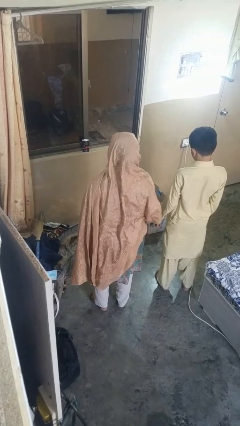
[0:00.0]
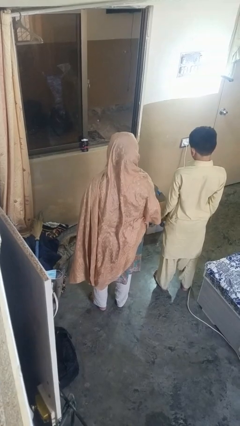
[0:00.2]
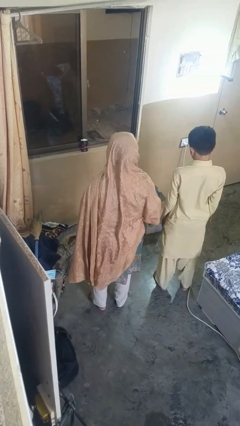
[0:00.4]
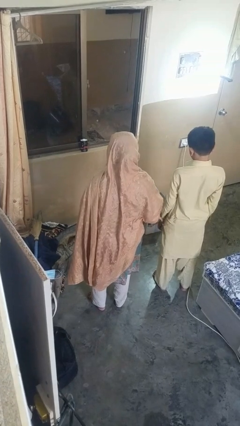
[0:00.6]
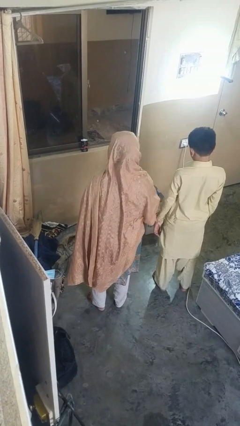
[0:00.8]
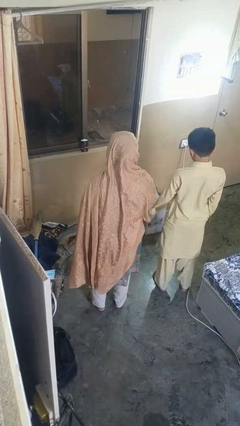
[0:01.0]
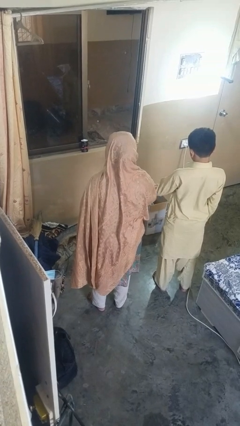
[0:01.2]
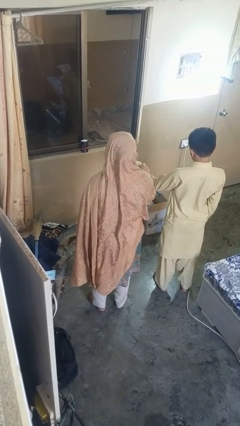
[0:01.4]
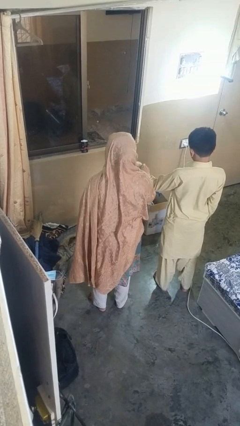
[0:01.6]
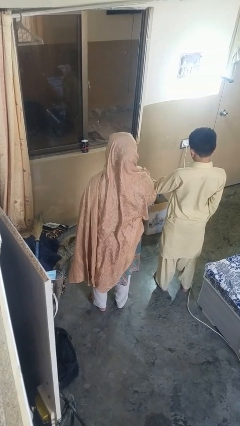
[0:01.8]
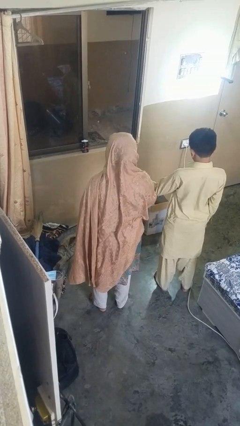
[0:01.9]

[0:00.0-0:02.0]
person grabs person by forearm

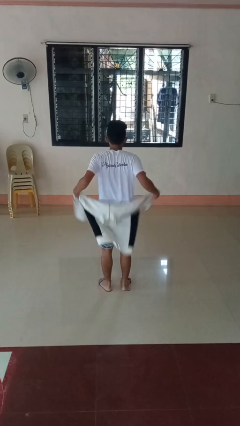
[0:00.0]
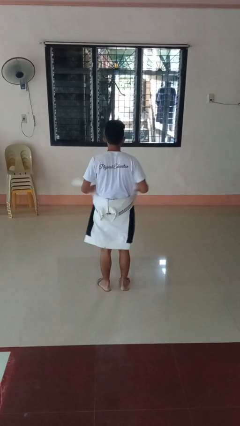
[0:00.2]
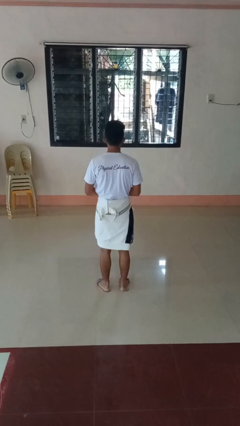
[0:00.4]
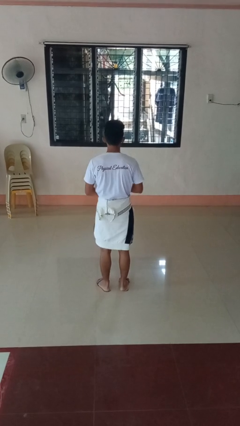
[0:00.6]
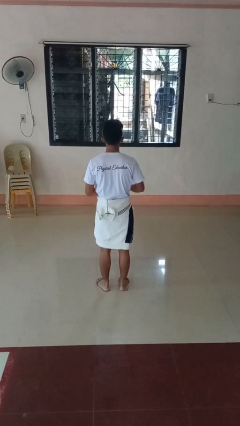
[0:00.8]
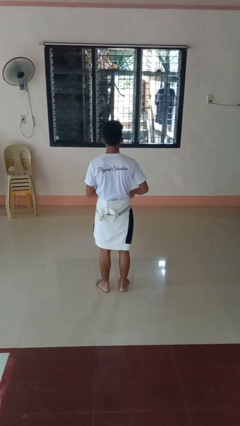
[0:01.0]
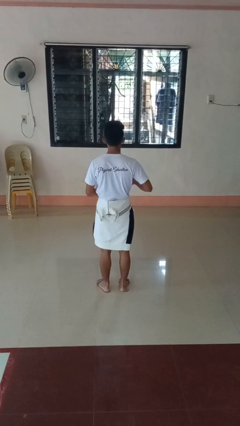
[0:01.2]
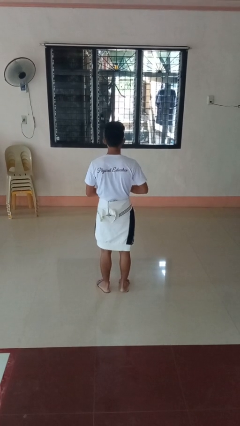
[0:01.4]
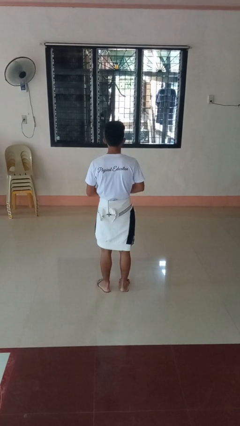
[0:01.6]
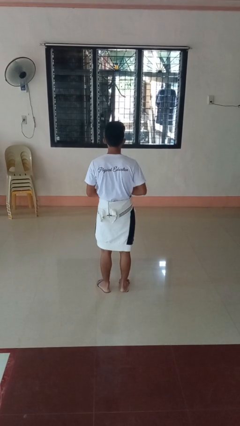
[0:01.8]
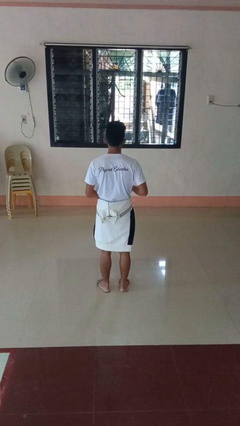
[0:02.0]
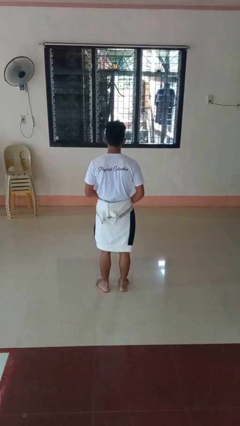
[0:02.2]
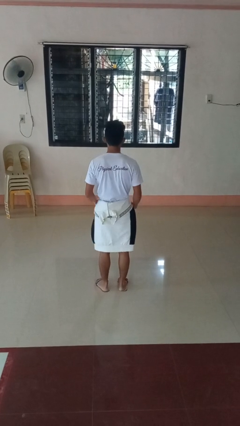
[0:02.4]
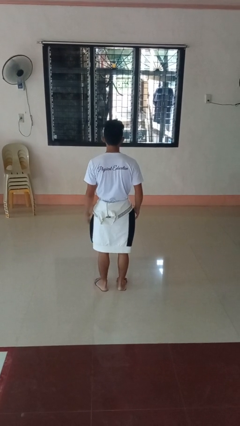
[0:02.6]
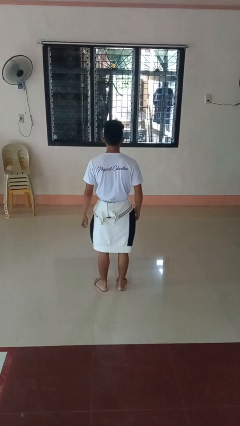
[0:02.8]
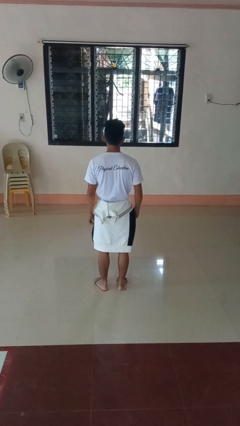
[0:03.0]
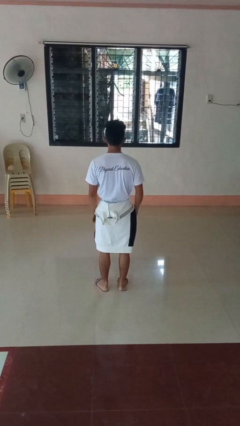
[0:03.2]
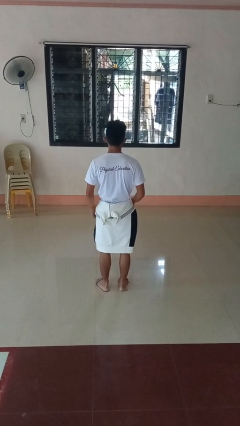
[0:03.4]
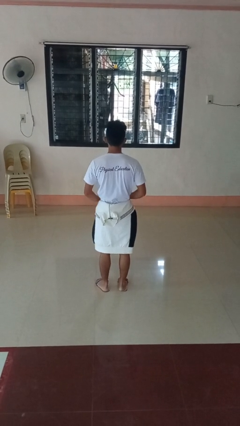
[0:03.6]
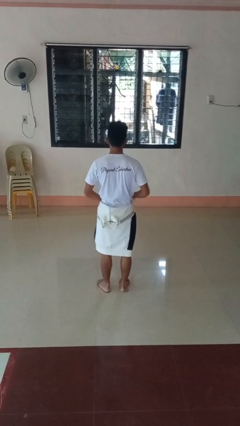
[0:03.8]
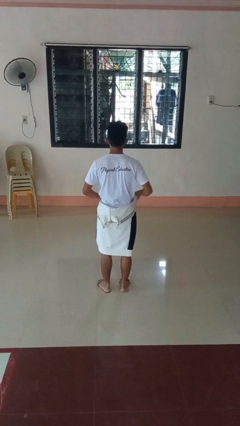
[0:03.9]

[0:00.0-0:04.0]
person ties jacket around waist

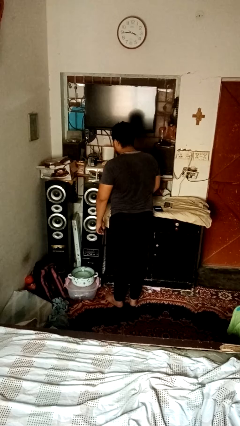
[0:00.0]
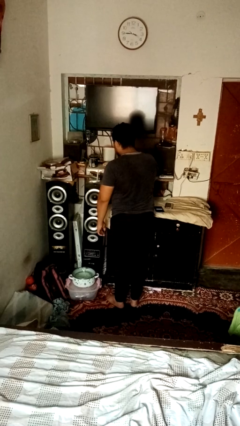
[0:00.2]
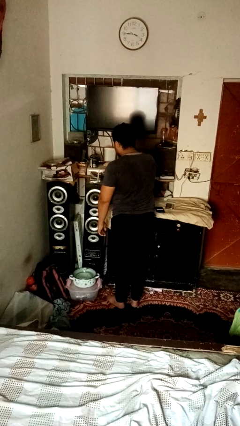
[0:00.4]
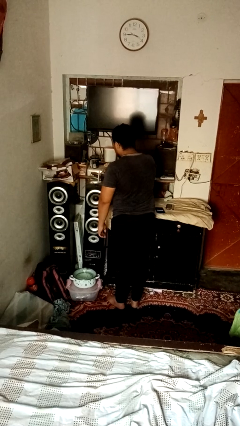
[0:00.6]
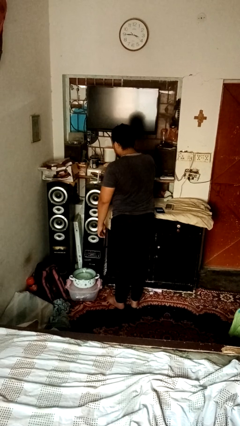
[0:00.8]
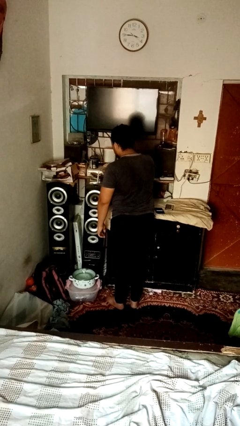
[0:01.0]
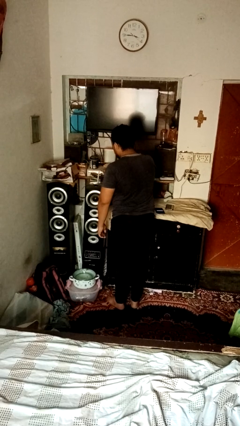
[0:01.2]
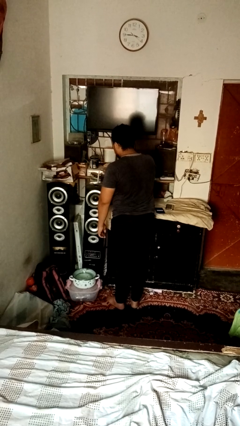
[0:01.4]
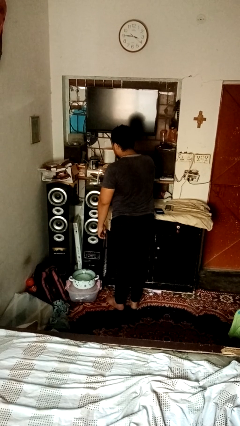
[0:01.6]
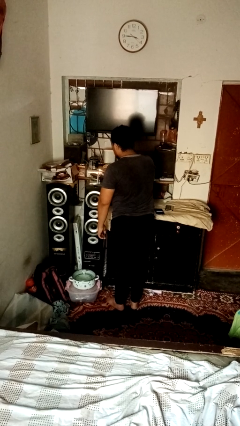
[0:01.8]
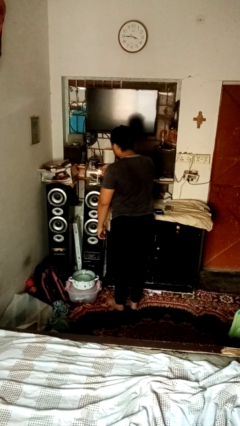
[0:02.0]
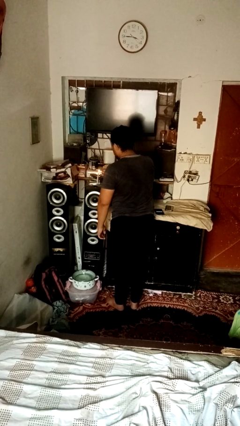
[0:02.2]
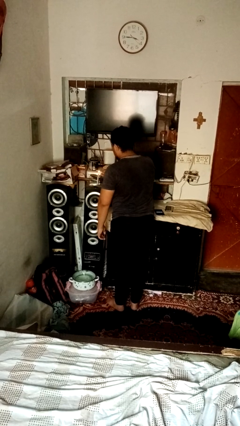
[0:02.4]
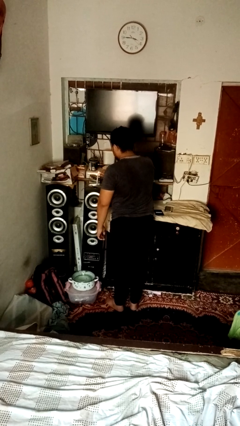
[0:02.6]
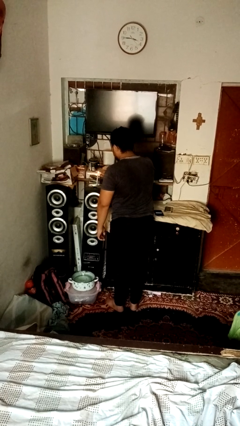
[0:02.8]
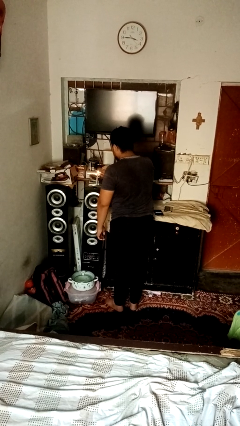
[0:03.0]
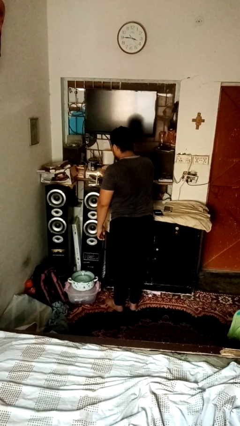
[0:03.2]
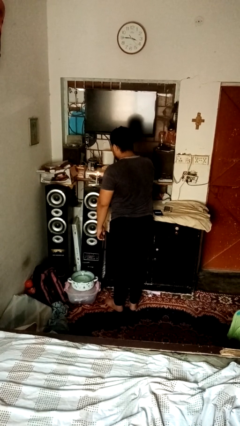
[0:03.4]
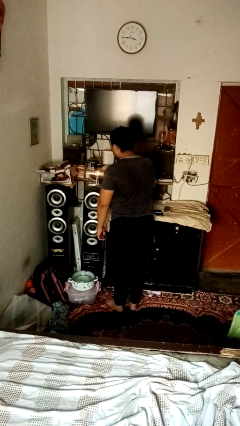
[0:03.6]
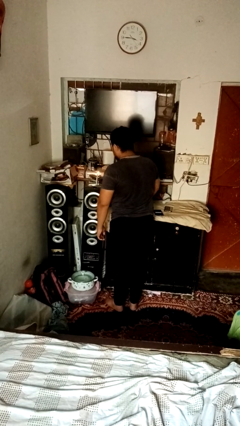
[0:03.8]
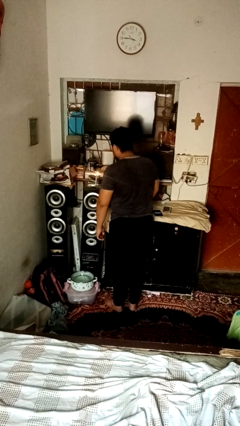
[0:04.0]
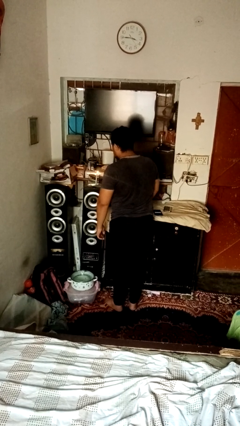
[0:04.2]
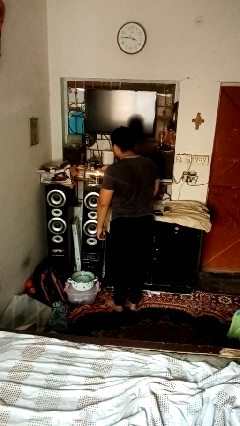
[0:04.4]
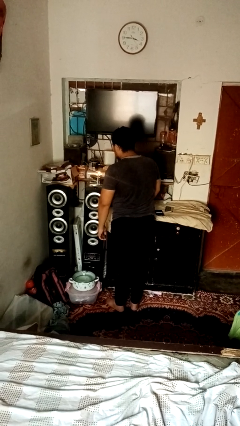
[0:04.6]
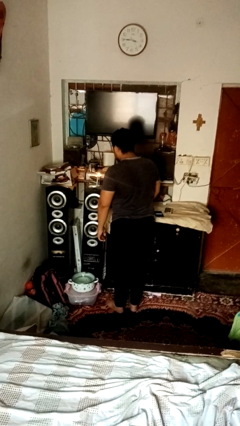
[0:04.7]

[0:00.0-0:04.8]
person lights candle

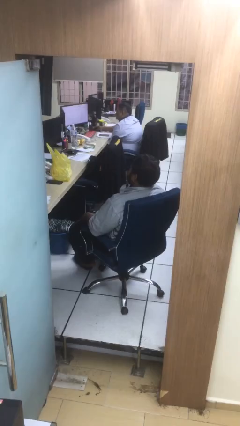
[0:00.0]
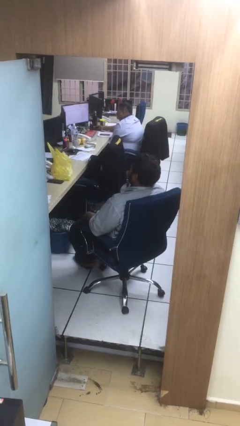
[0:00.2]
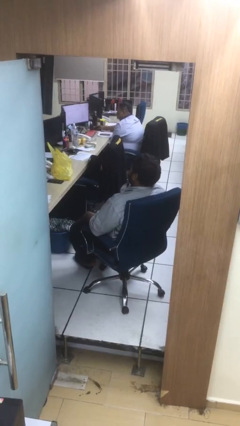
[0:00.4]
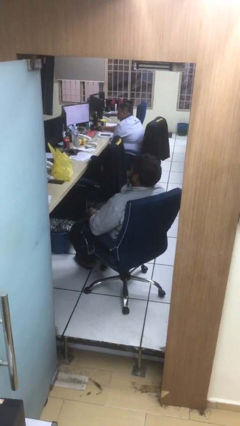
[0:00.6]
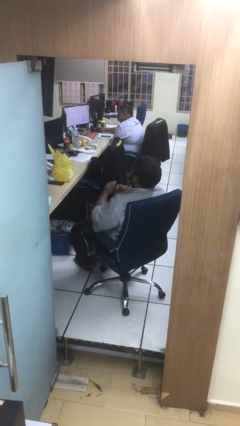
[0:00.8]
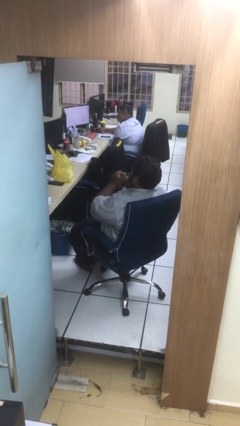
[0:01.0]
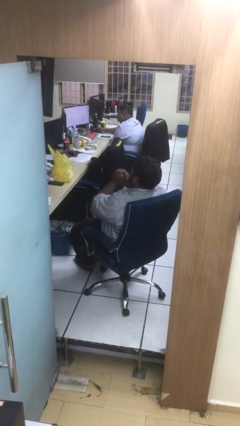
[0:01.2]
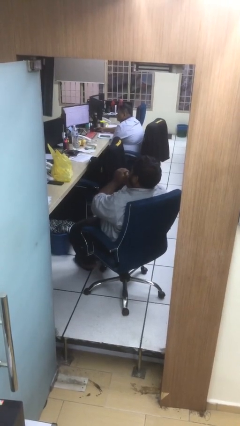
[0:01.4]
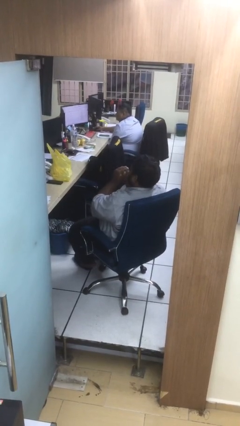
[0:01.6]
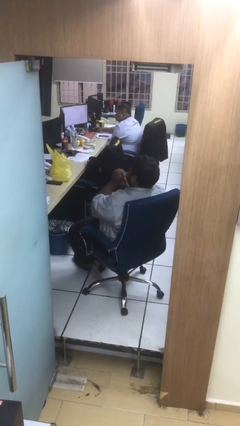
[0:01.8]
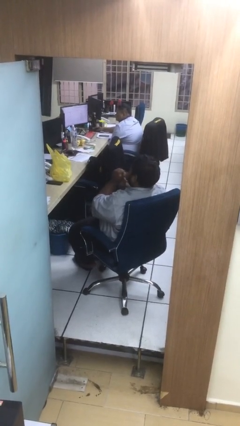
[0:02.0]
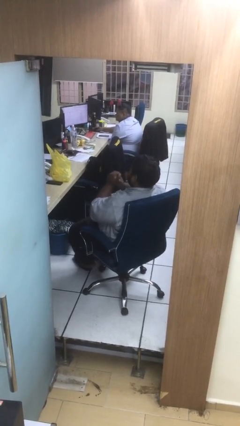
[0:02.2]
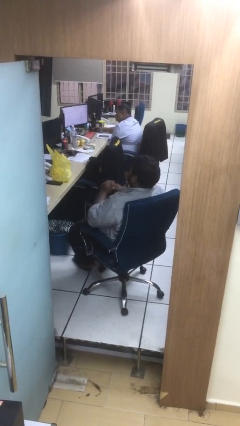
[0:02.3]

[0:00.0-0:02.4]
person cracks knuckles

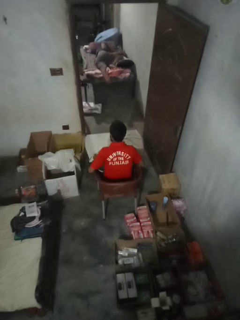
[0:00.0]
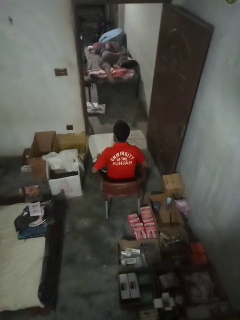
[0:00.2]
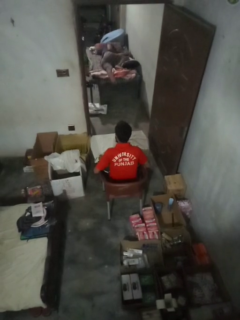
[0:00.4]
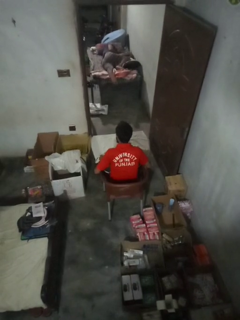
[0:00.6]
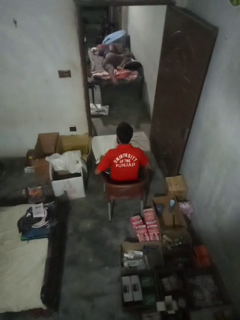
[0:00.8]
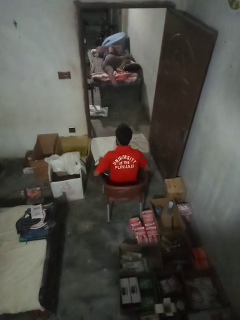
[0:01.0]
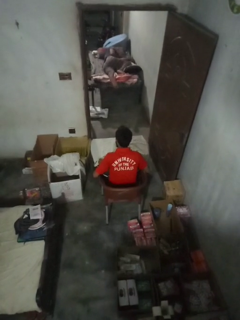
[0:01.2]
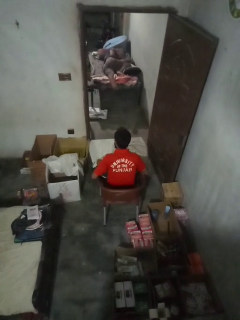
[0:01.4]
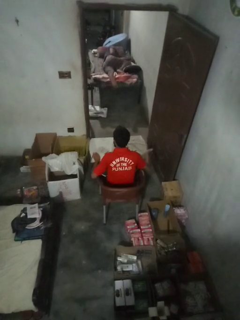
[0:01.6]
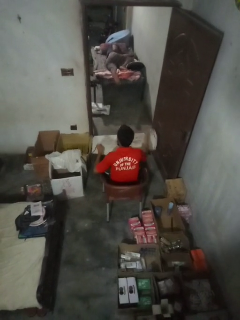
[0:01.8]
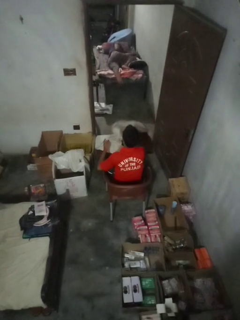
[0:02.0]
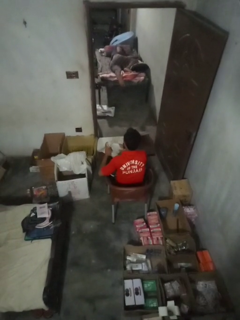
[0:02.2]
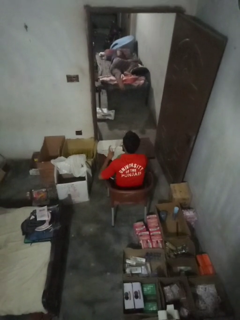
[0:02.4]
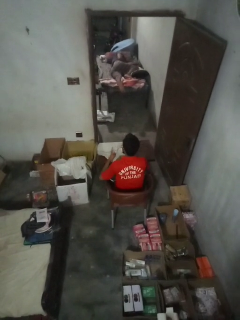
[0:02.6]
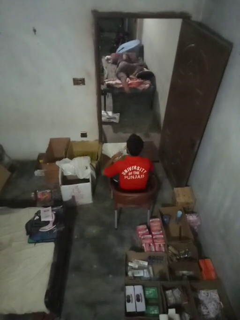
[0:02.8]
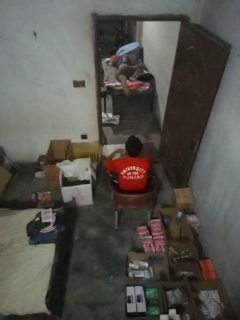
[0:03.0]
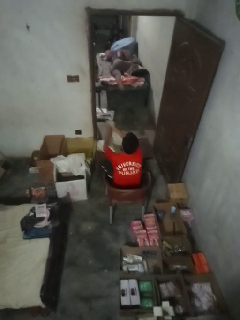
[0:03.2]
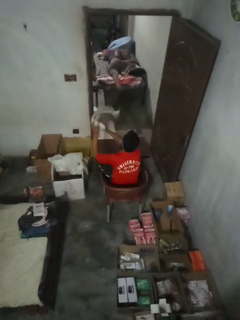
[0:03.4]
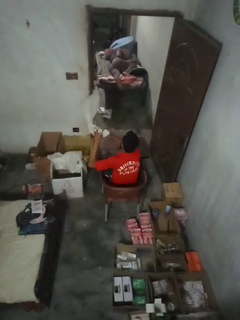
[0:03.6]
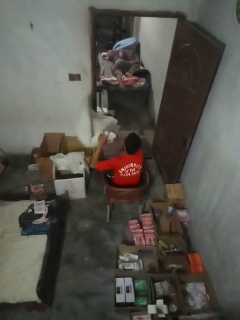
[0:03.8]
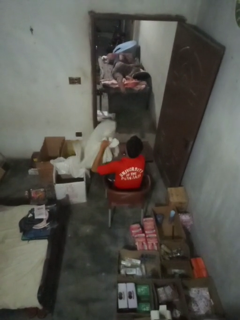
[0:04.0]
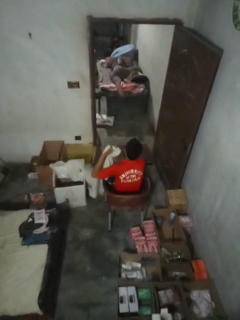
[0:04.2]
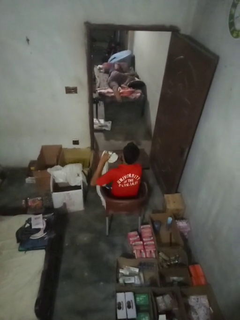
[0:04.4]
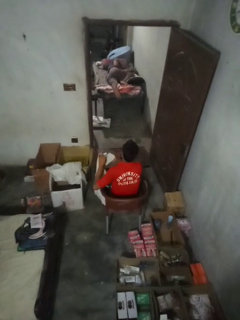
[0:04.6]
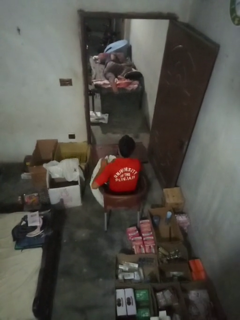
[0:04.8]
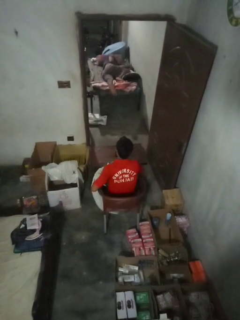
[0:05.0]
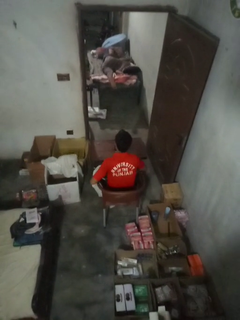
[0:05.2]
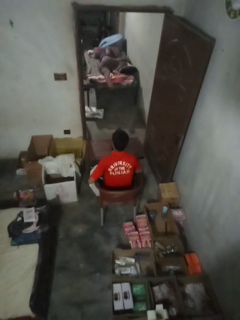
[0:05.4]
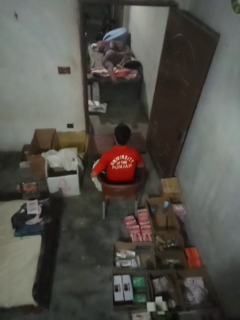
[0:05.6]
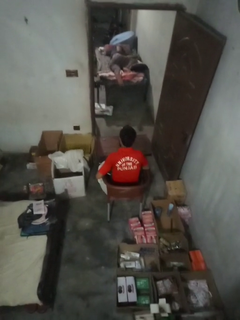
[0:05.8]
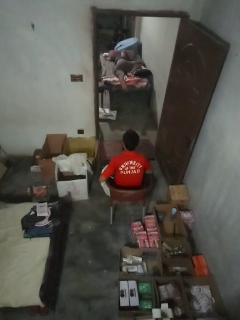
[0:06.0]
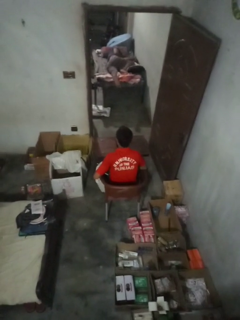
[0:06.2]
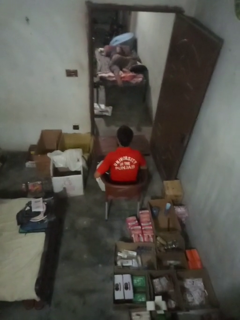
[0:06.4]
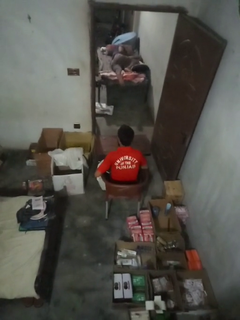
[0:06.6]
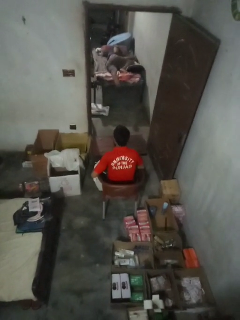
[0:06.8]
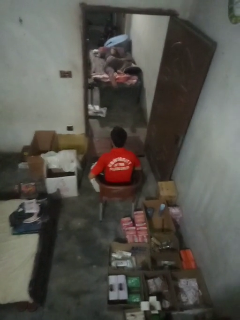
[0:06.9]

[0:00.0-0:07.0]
person folds tablecloth
